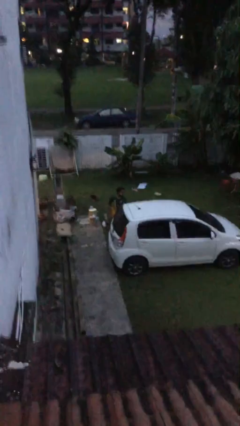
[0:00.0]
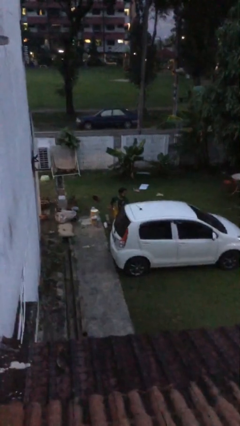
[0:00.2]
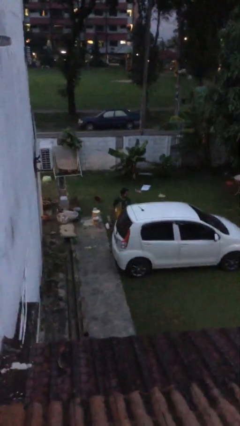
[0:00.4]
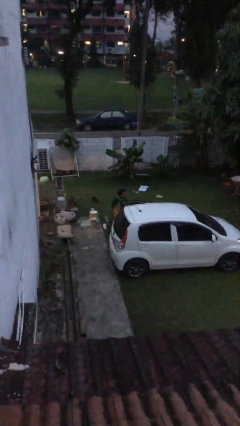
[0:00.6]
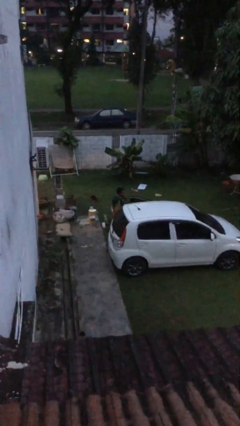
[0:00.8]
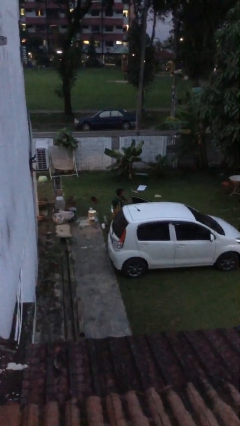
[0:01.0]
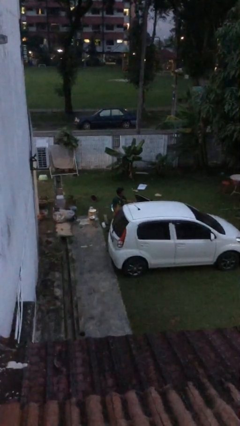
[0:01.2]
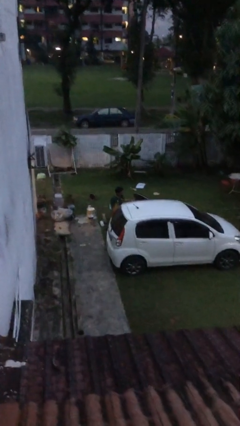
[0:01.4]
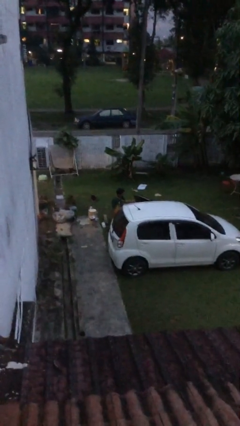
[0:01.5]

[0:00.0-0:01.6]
person opens car door

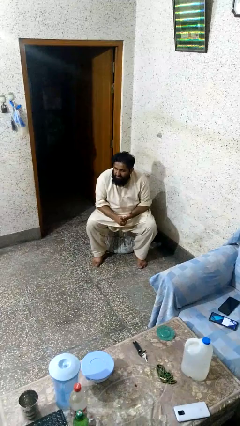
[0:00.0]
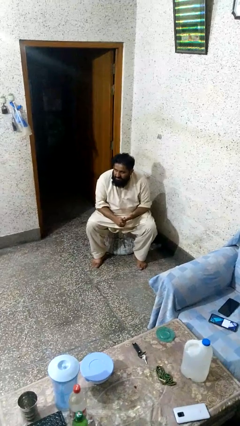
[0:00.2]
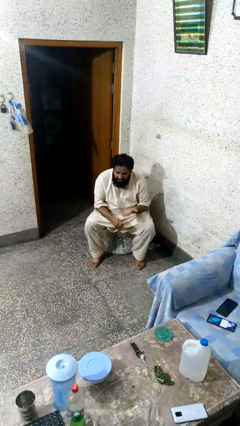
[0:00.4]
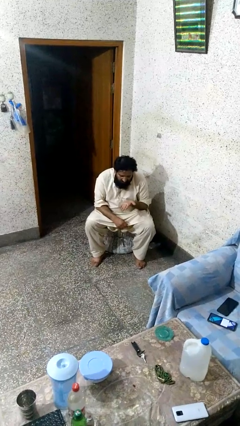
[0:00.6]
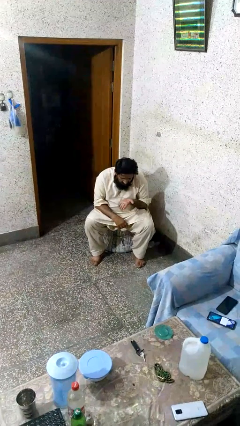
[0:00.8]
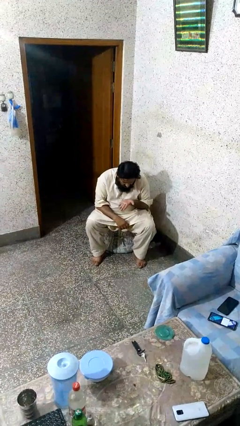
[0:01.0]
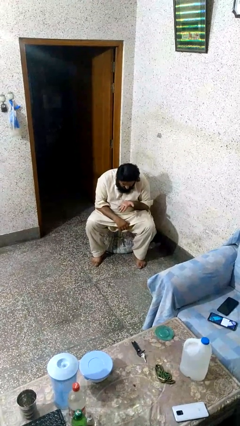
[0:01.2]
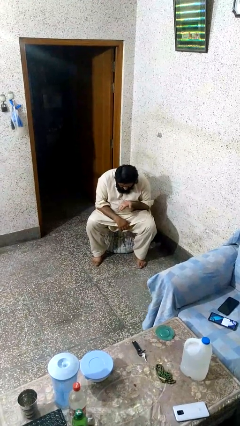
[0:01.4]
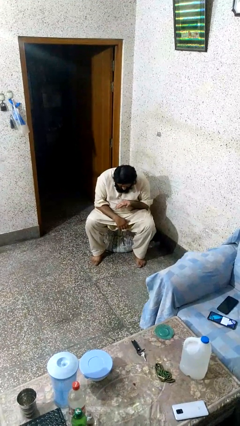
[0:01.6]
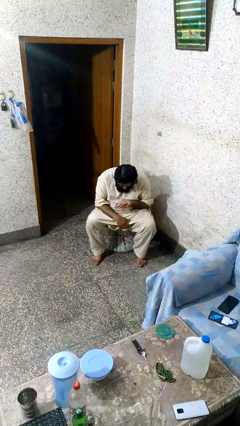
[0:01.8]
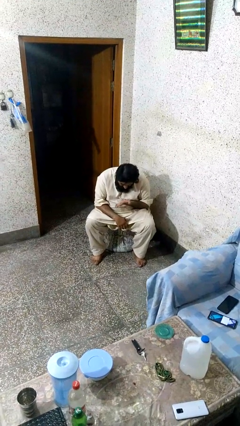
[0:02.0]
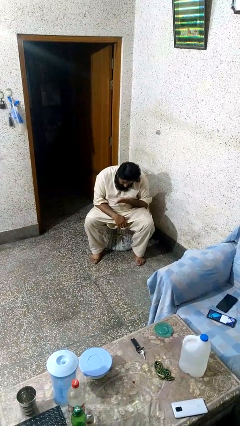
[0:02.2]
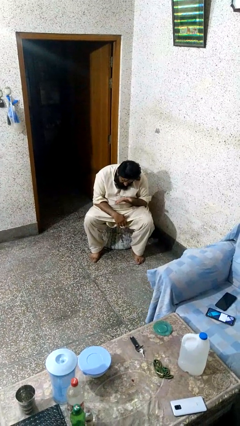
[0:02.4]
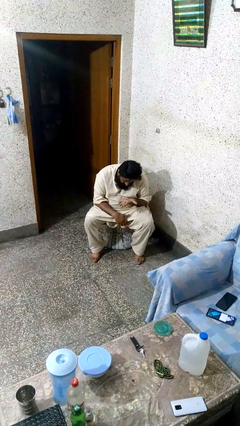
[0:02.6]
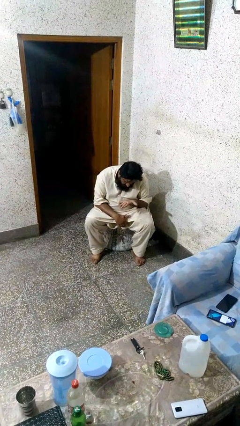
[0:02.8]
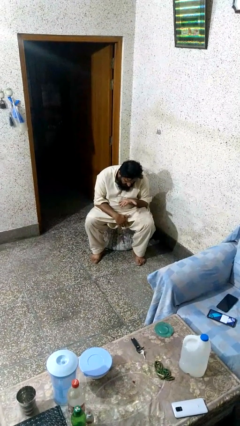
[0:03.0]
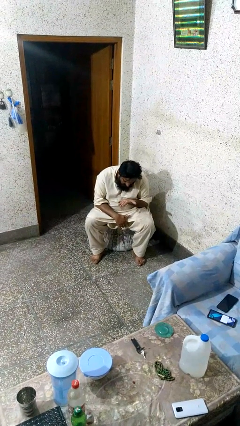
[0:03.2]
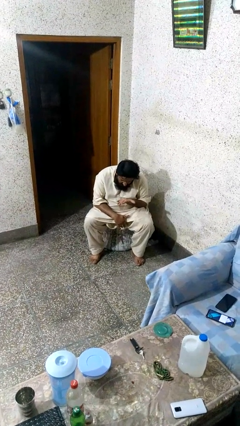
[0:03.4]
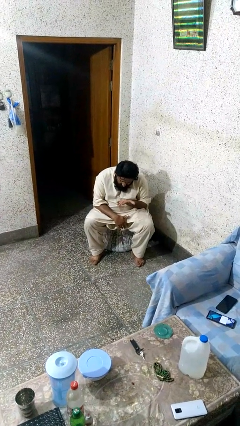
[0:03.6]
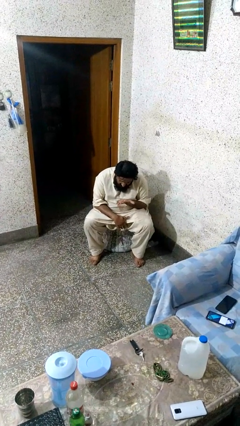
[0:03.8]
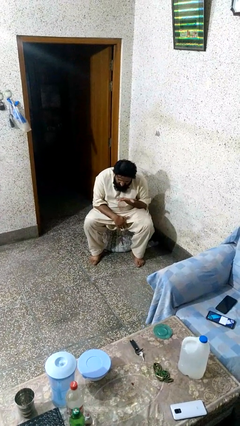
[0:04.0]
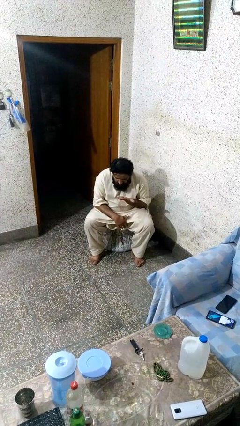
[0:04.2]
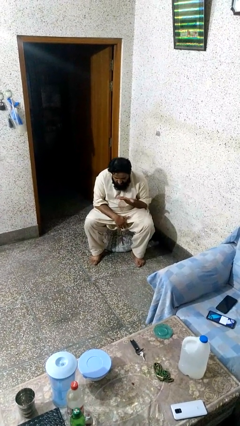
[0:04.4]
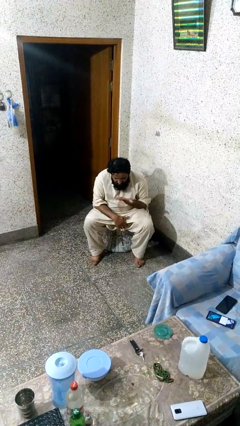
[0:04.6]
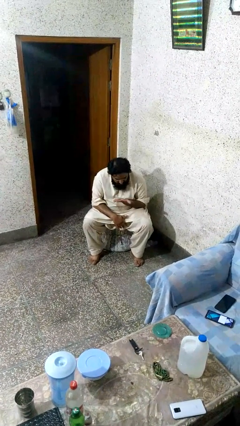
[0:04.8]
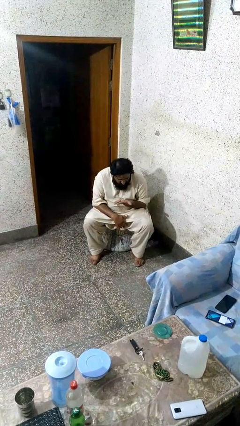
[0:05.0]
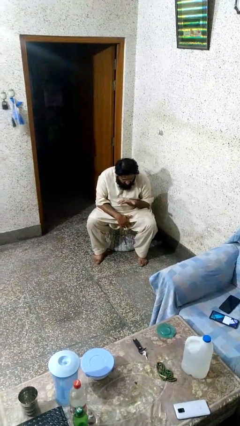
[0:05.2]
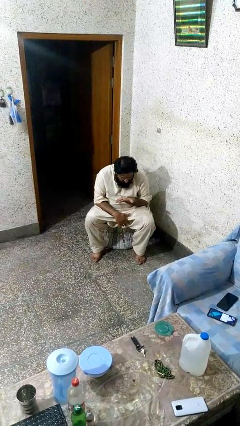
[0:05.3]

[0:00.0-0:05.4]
person looks at hands in lap

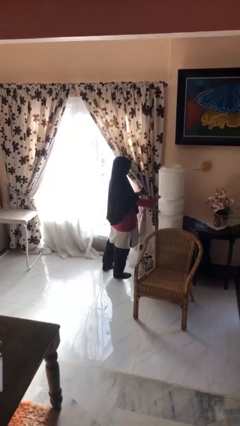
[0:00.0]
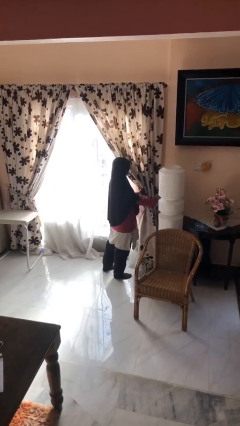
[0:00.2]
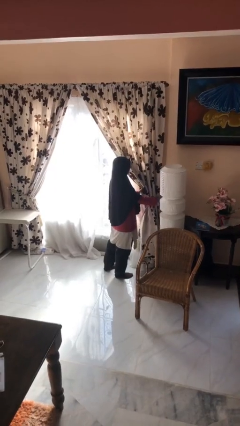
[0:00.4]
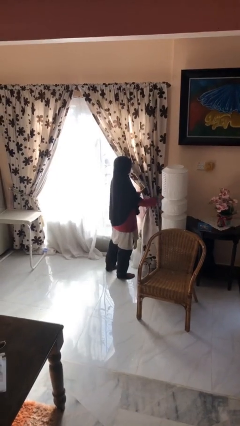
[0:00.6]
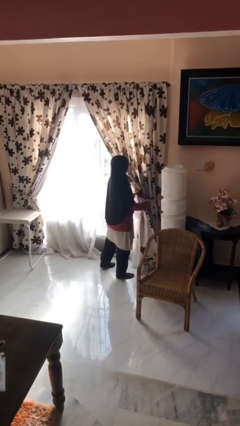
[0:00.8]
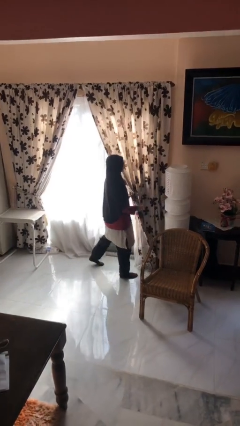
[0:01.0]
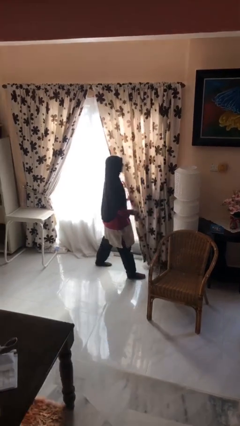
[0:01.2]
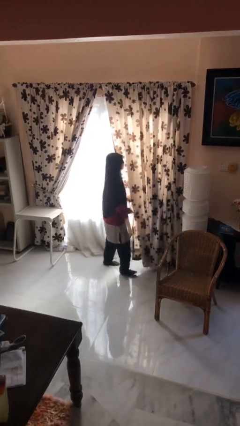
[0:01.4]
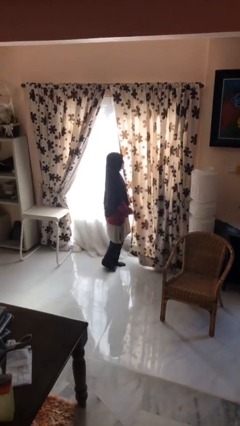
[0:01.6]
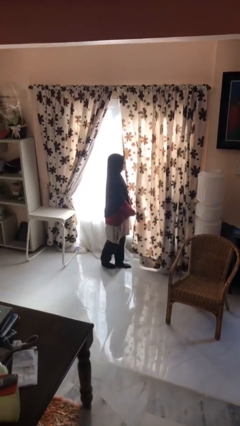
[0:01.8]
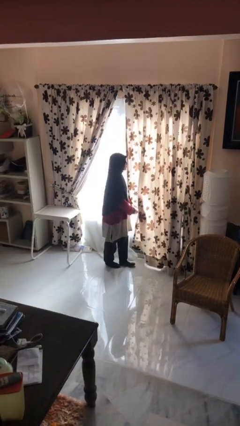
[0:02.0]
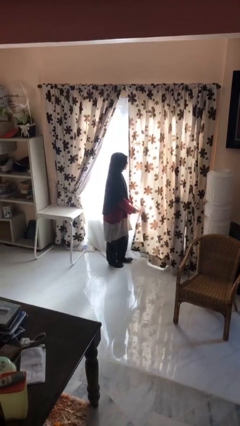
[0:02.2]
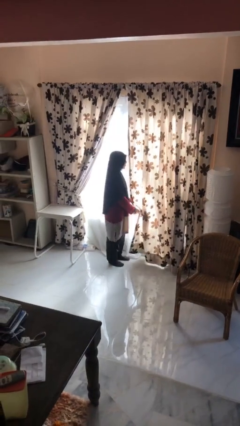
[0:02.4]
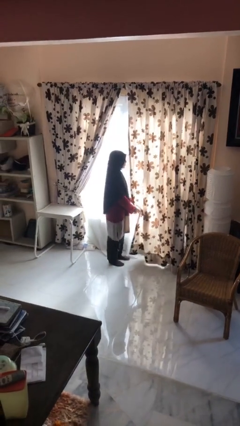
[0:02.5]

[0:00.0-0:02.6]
person closes curtains

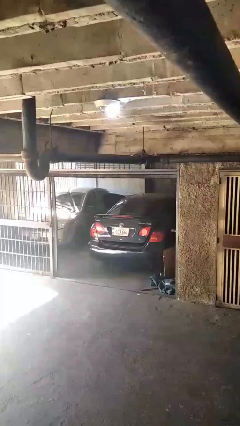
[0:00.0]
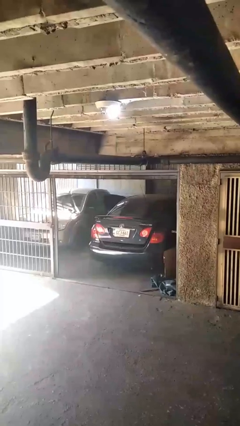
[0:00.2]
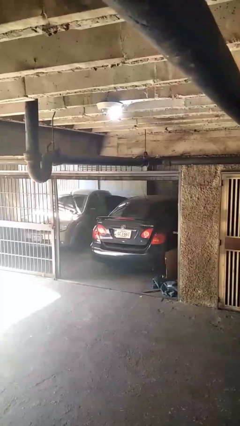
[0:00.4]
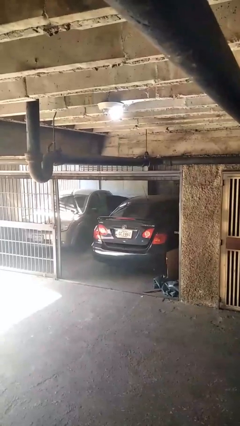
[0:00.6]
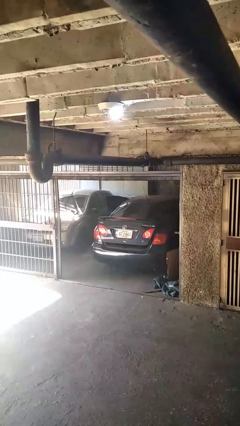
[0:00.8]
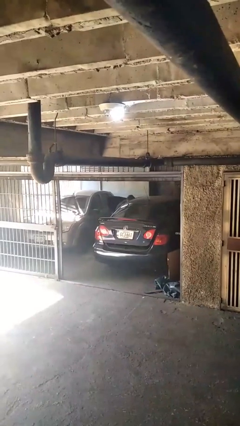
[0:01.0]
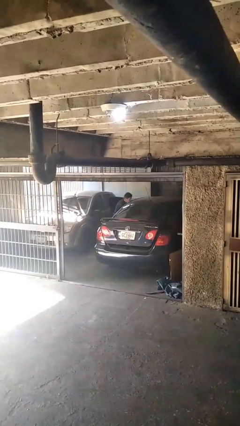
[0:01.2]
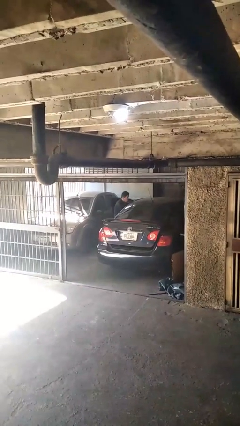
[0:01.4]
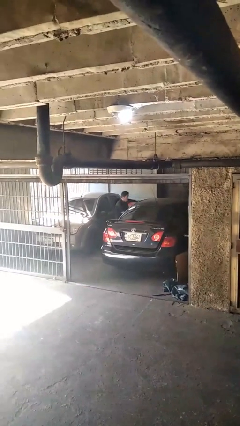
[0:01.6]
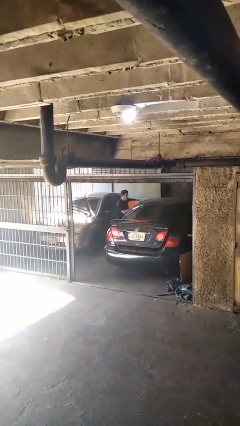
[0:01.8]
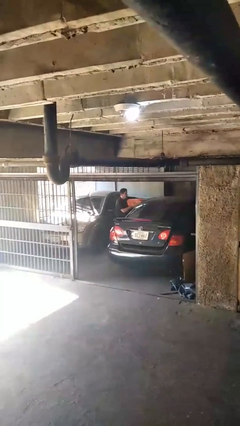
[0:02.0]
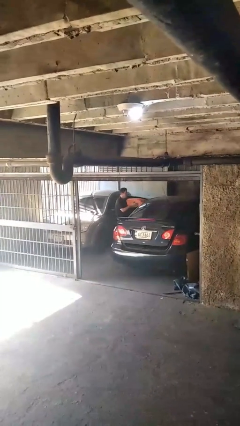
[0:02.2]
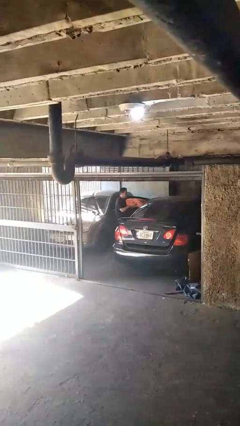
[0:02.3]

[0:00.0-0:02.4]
person unloads car

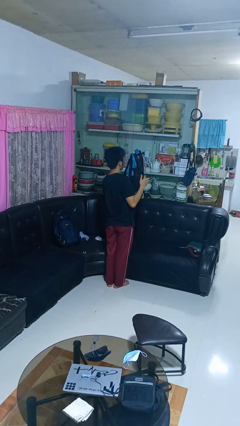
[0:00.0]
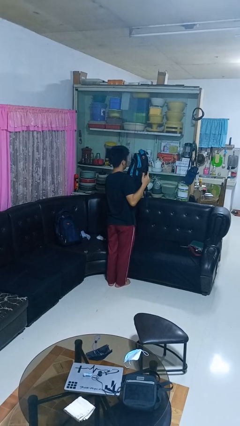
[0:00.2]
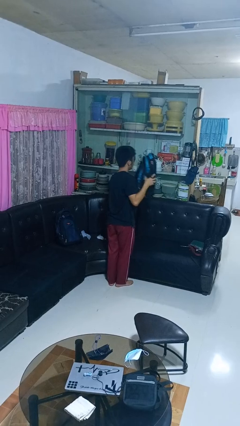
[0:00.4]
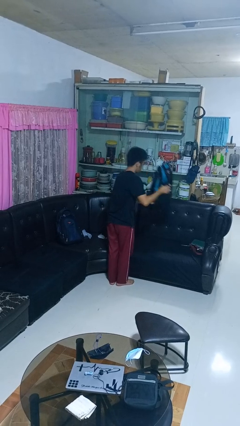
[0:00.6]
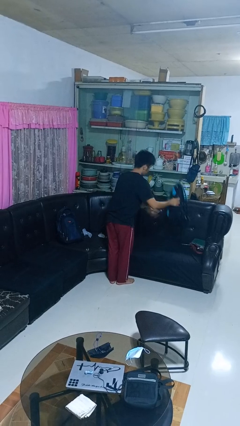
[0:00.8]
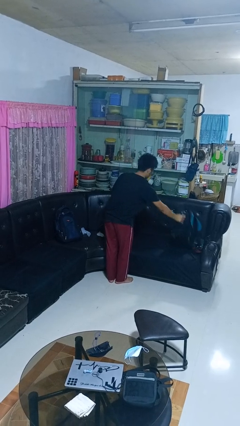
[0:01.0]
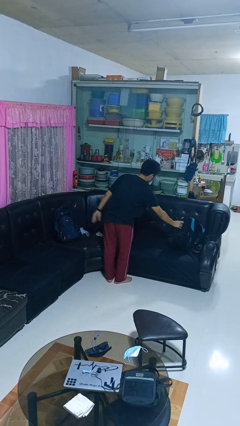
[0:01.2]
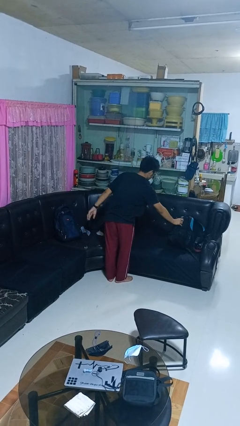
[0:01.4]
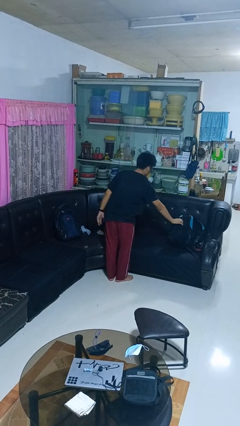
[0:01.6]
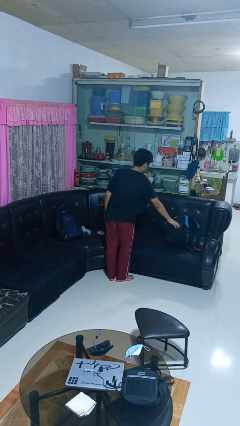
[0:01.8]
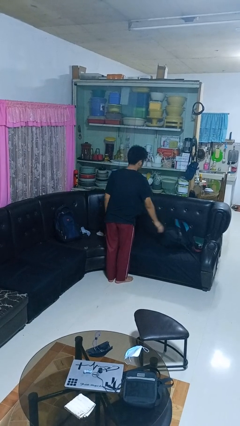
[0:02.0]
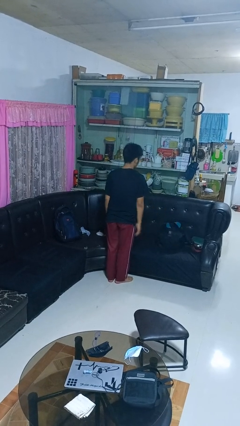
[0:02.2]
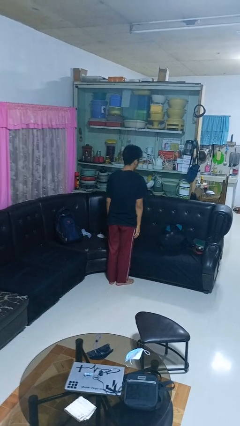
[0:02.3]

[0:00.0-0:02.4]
person puts down object on couch

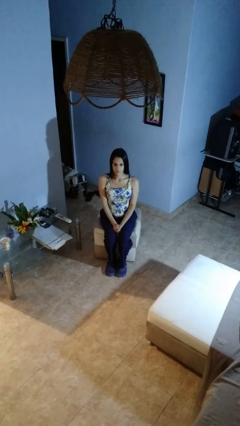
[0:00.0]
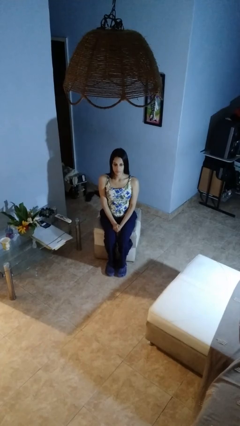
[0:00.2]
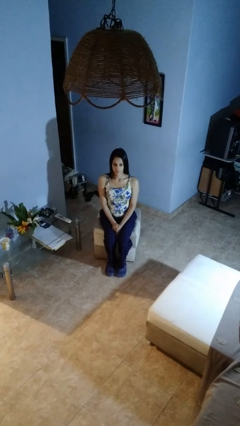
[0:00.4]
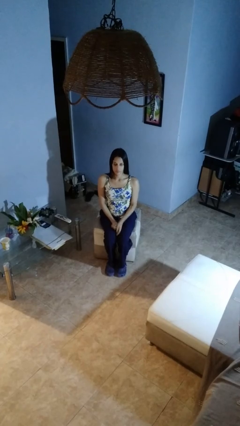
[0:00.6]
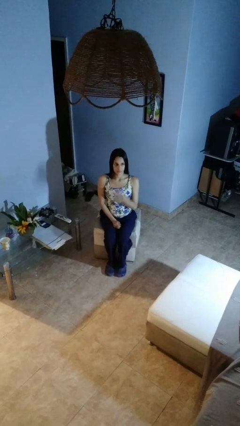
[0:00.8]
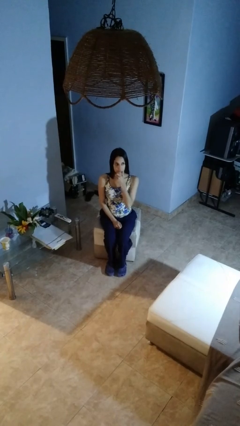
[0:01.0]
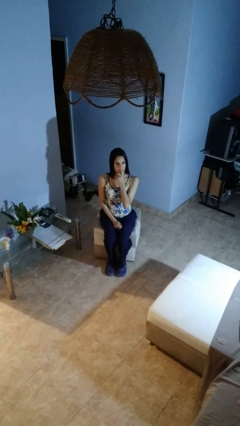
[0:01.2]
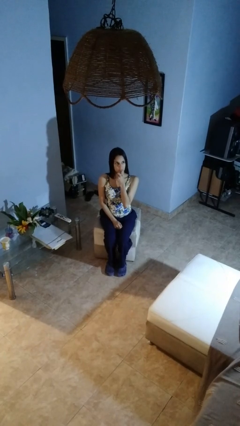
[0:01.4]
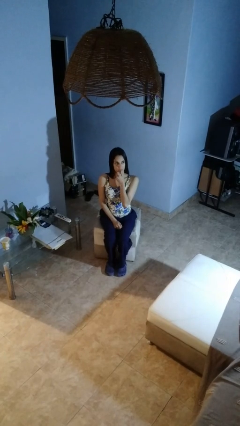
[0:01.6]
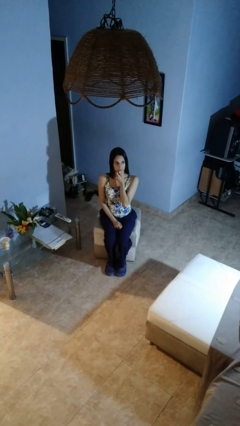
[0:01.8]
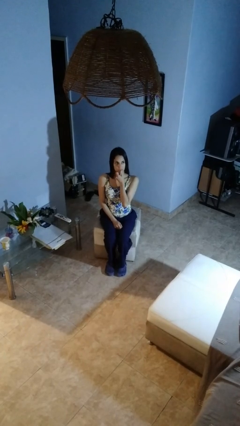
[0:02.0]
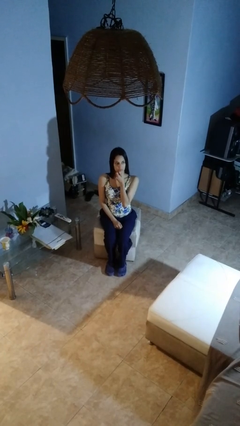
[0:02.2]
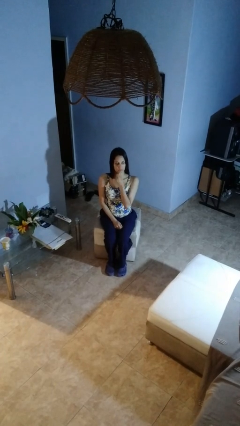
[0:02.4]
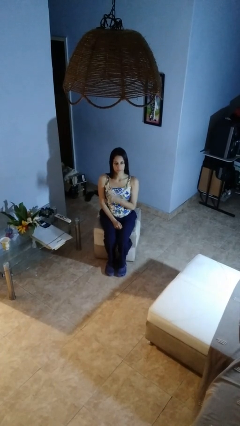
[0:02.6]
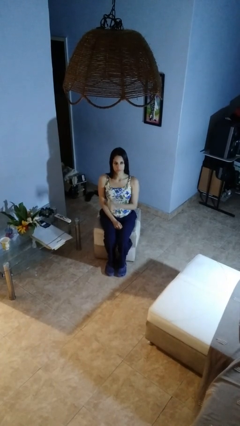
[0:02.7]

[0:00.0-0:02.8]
person strokes chin
